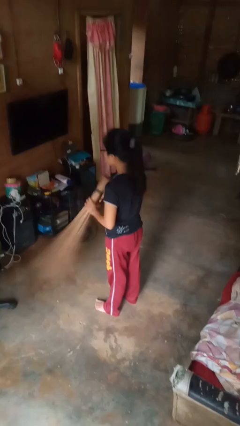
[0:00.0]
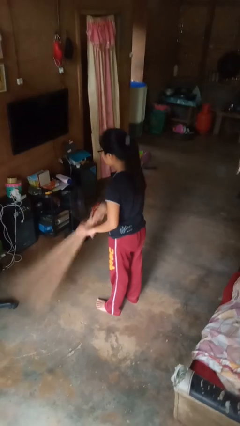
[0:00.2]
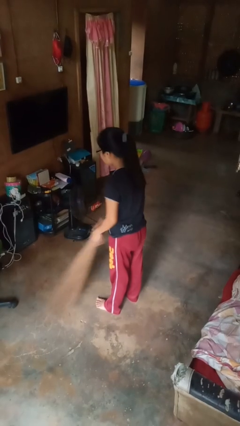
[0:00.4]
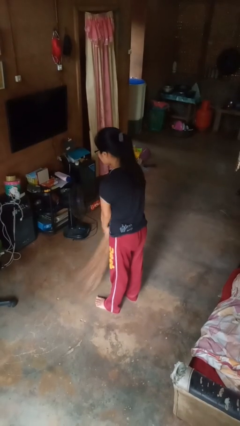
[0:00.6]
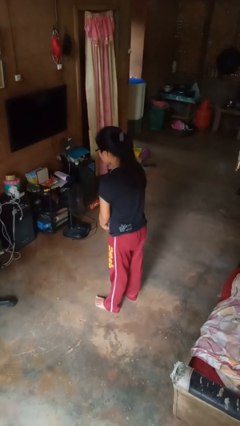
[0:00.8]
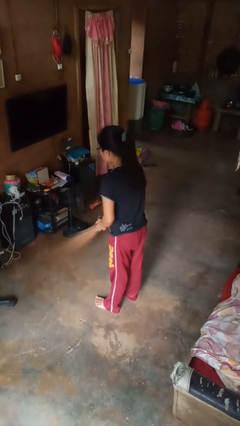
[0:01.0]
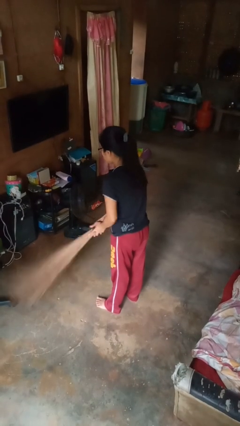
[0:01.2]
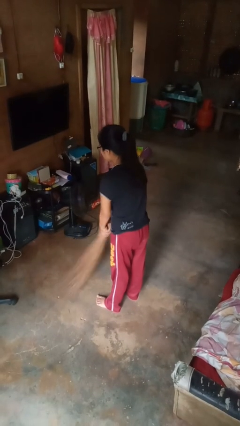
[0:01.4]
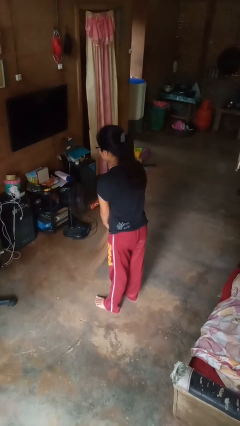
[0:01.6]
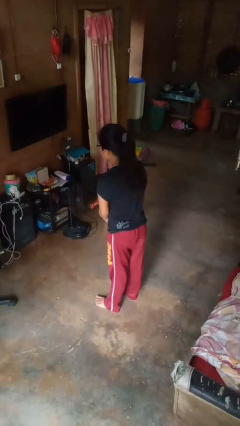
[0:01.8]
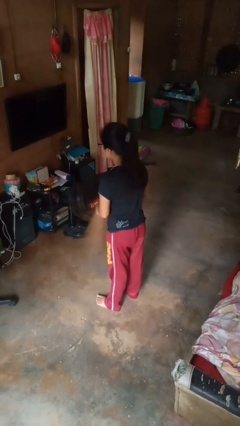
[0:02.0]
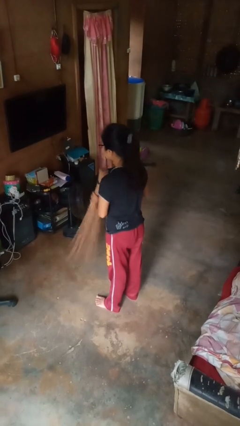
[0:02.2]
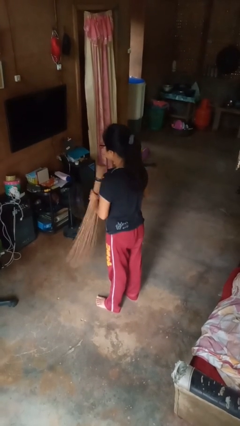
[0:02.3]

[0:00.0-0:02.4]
person sweeps floor

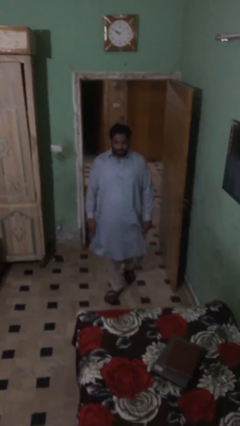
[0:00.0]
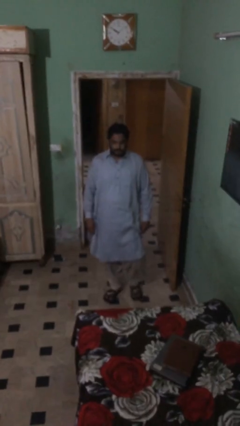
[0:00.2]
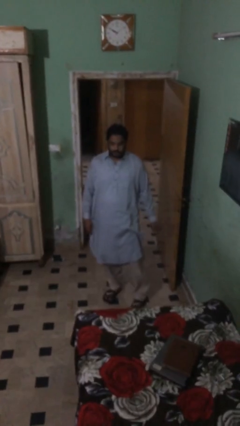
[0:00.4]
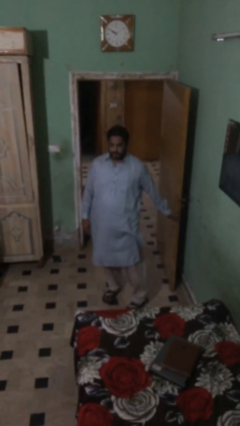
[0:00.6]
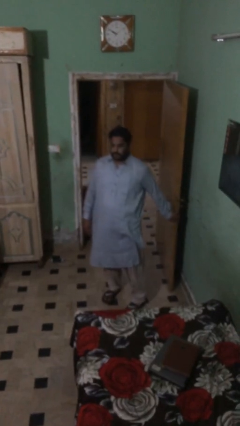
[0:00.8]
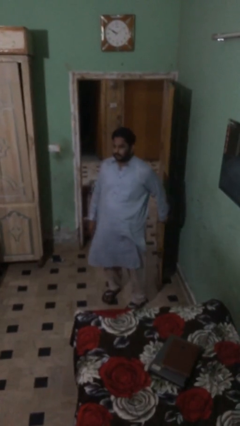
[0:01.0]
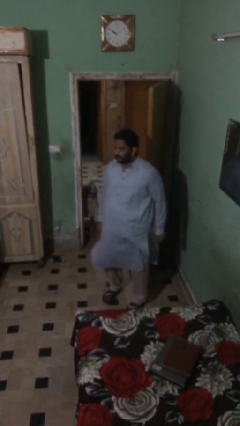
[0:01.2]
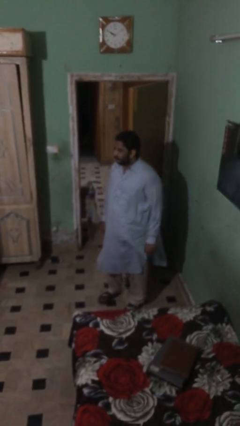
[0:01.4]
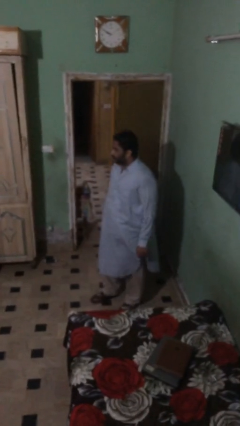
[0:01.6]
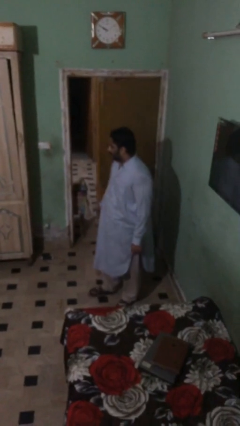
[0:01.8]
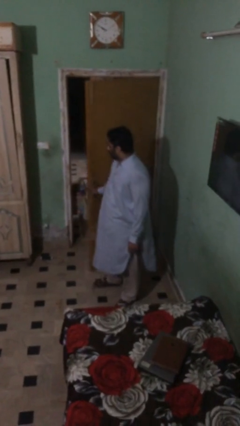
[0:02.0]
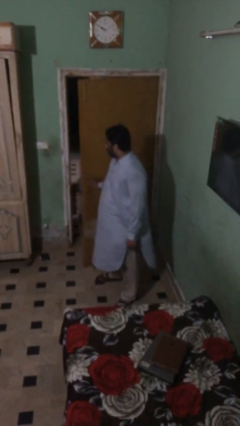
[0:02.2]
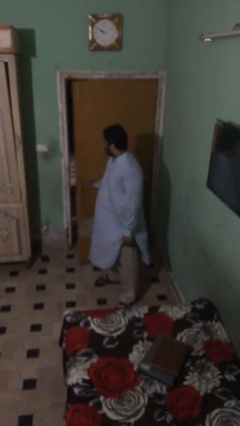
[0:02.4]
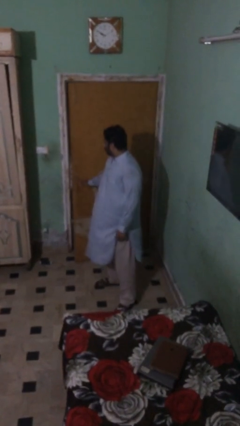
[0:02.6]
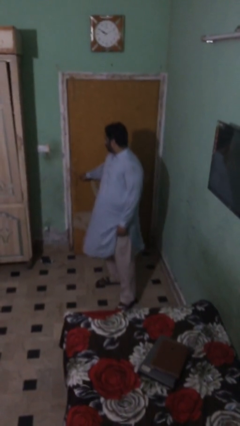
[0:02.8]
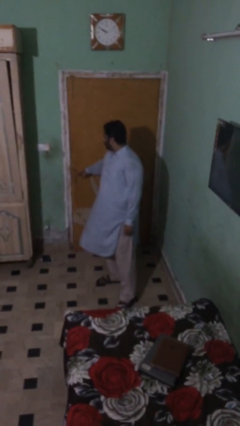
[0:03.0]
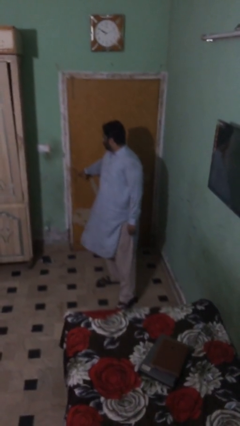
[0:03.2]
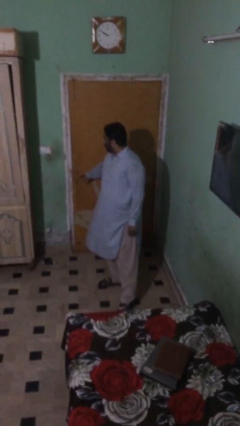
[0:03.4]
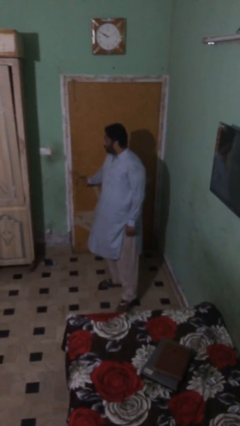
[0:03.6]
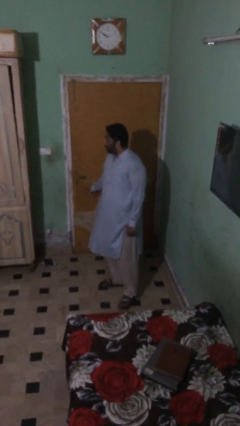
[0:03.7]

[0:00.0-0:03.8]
person closes facility door

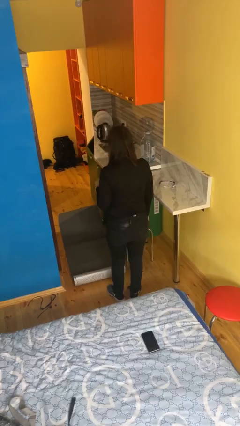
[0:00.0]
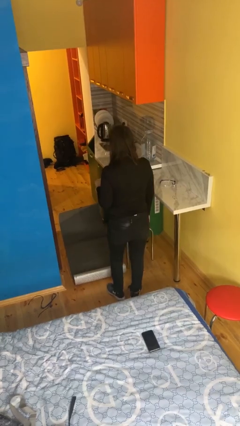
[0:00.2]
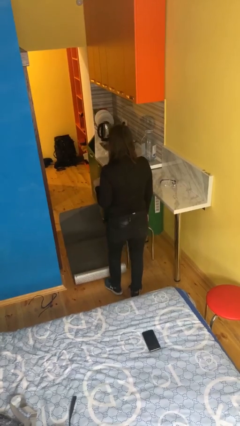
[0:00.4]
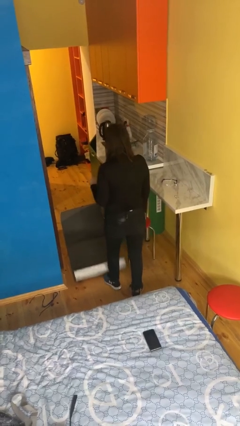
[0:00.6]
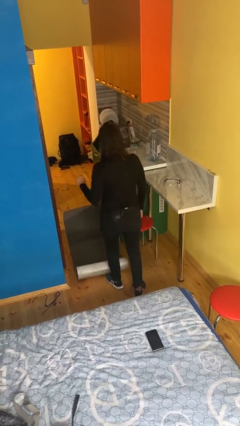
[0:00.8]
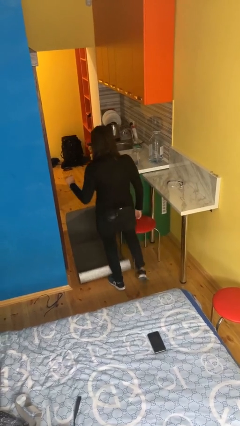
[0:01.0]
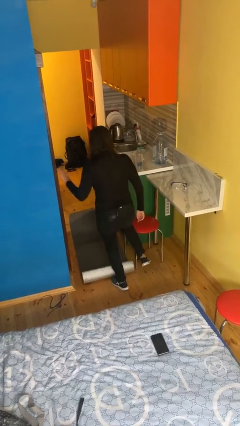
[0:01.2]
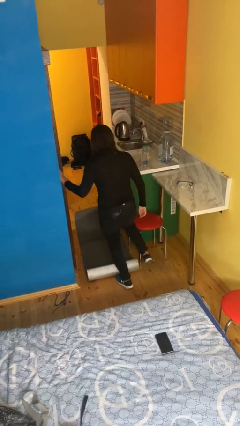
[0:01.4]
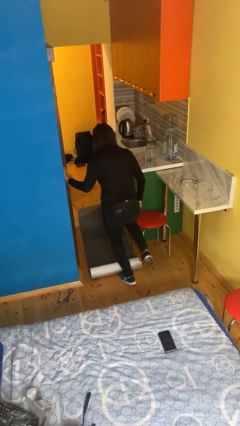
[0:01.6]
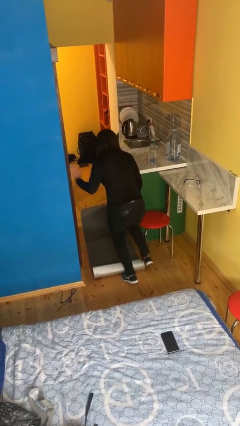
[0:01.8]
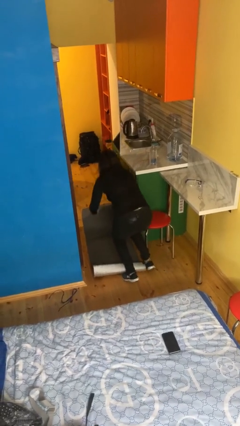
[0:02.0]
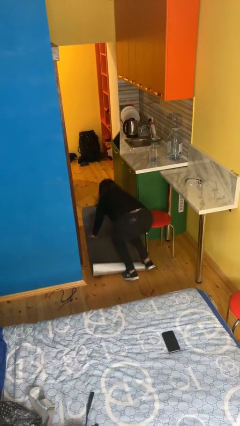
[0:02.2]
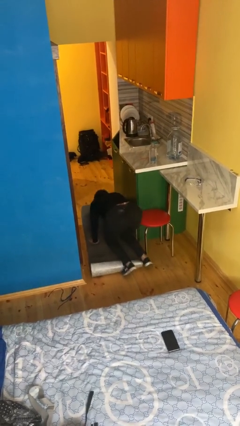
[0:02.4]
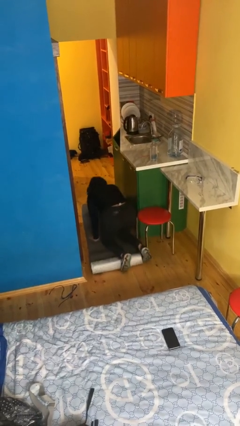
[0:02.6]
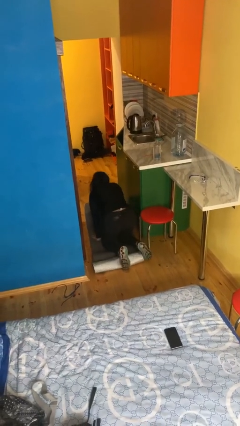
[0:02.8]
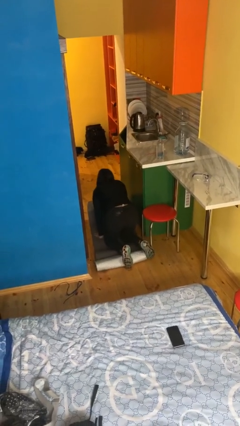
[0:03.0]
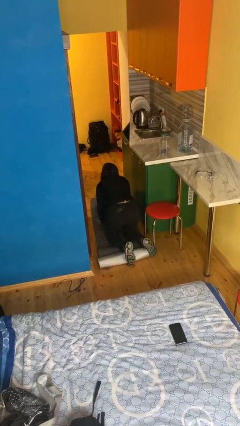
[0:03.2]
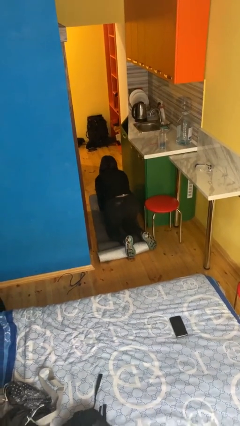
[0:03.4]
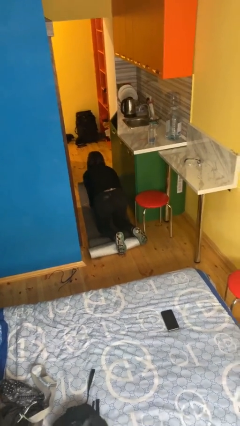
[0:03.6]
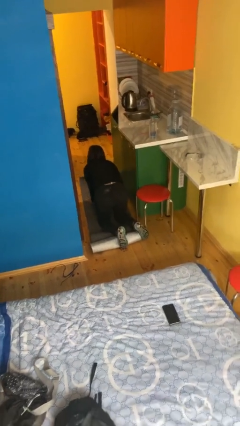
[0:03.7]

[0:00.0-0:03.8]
person trips on object on floor

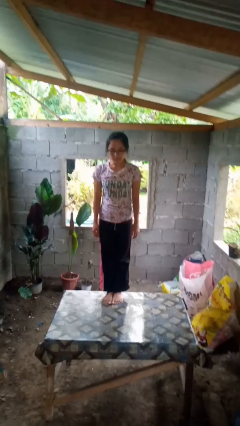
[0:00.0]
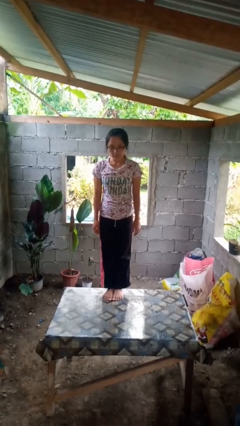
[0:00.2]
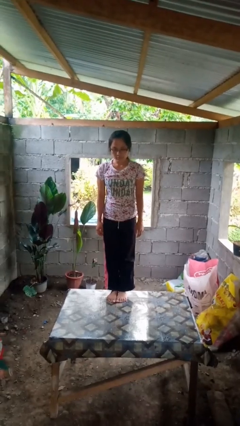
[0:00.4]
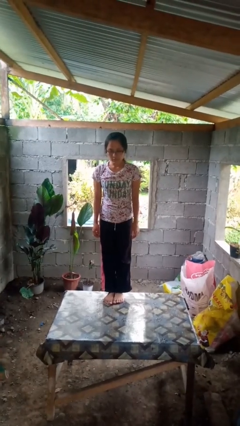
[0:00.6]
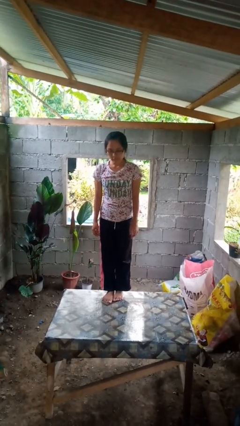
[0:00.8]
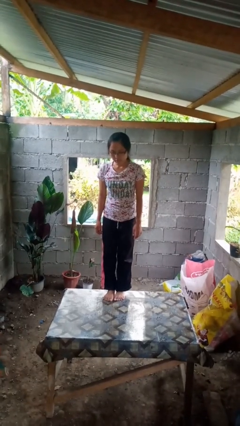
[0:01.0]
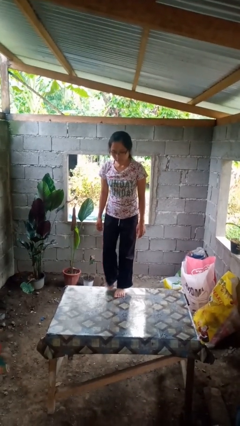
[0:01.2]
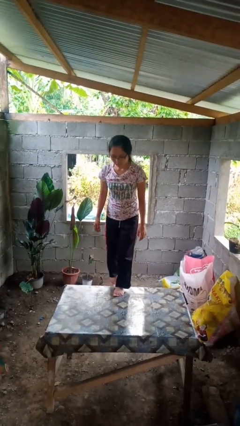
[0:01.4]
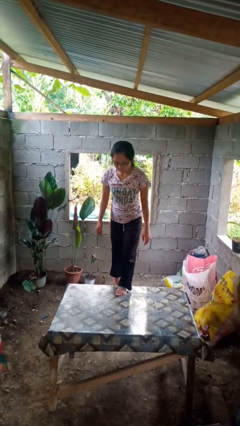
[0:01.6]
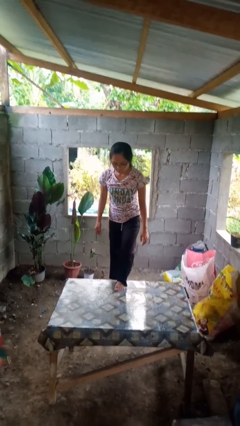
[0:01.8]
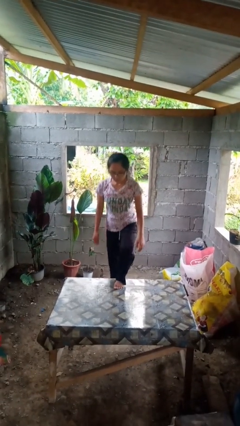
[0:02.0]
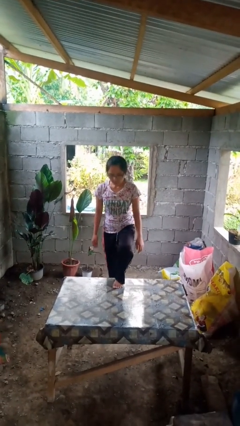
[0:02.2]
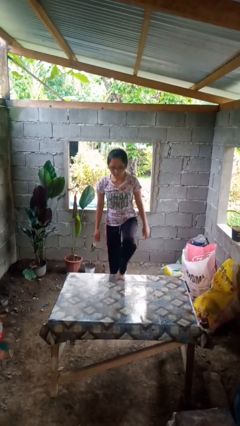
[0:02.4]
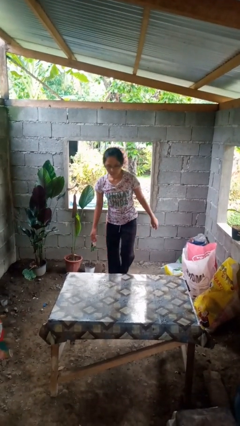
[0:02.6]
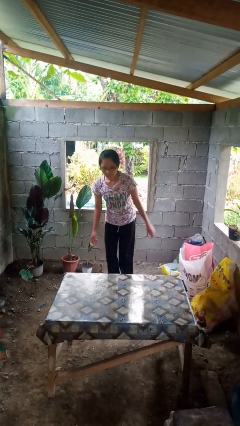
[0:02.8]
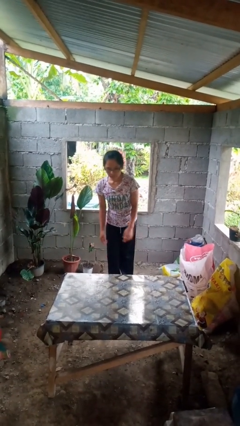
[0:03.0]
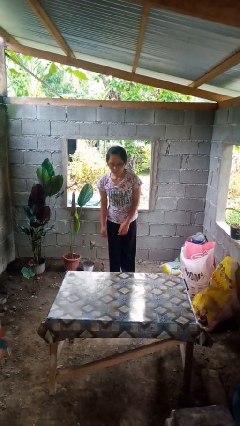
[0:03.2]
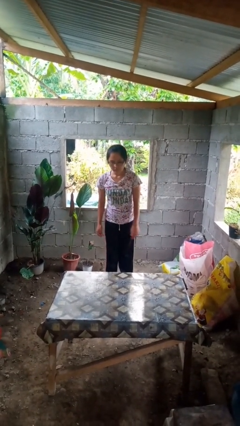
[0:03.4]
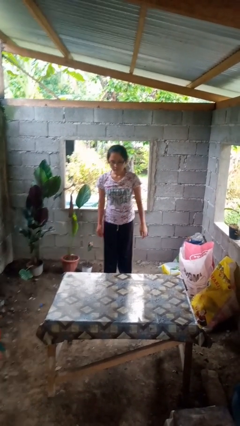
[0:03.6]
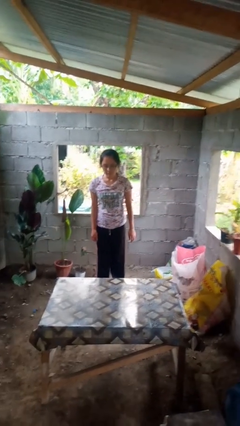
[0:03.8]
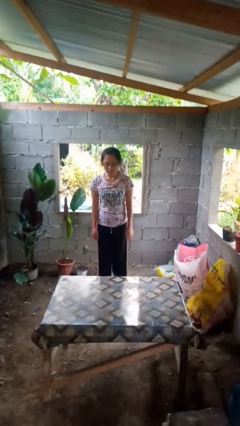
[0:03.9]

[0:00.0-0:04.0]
person climbs off table

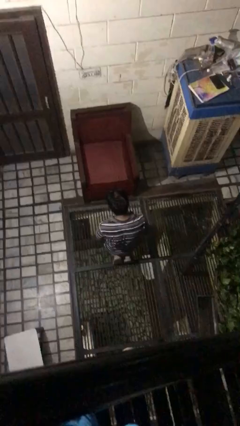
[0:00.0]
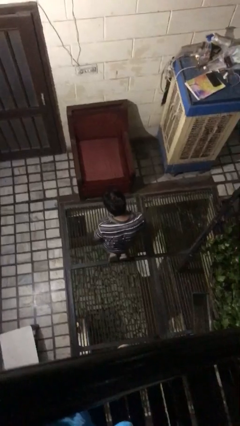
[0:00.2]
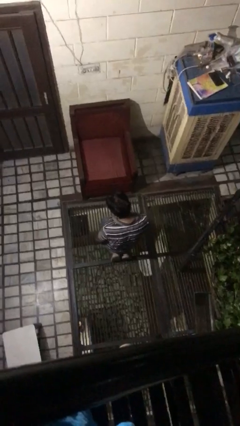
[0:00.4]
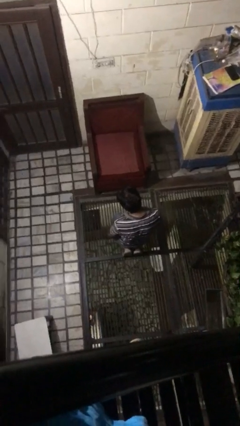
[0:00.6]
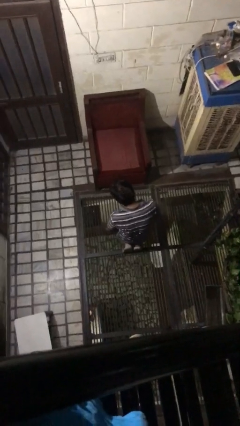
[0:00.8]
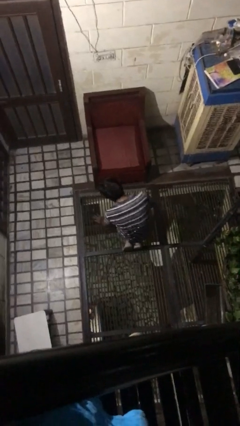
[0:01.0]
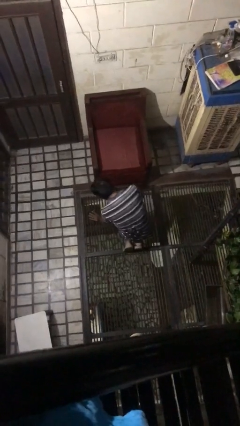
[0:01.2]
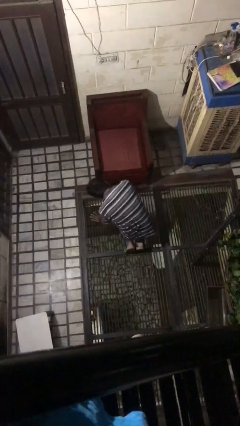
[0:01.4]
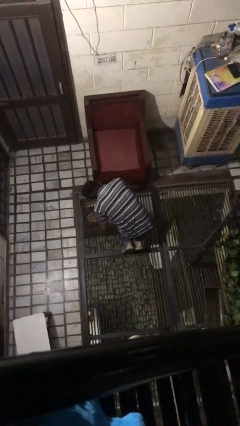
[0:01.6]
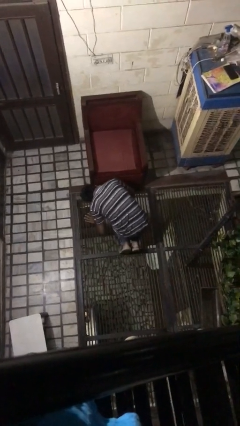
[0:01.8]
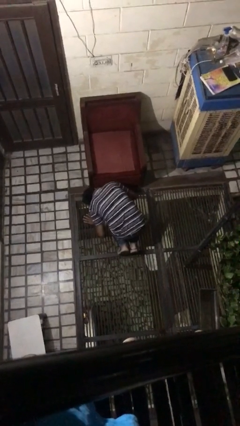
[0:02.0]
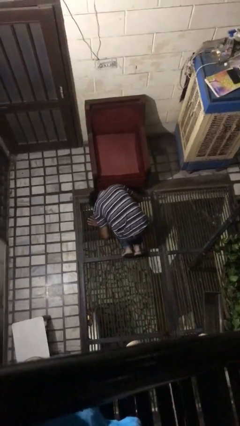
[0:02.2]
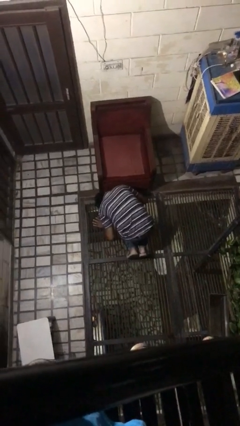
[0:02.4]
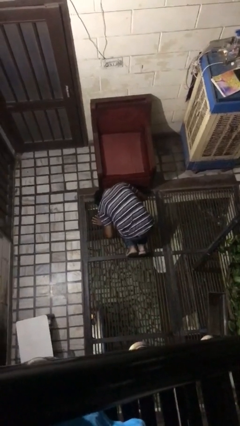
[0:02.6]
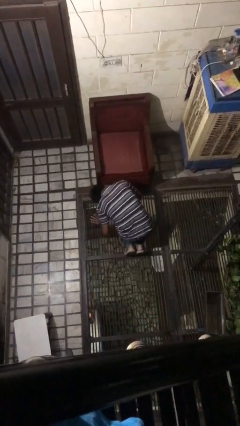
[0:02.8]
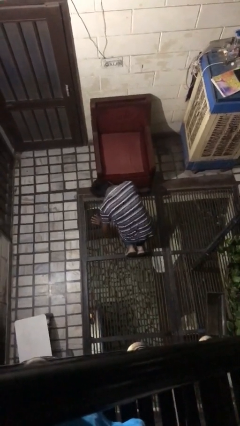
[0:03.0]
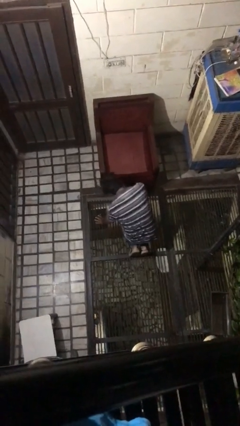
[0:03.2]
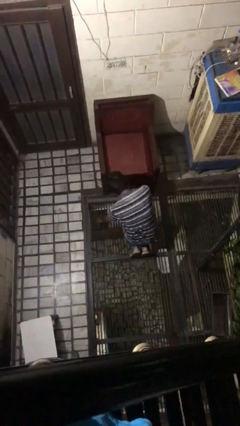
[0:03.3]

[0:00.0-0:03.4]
person searches under couch

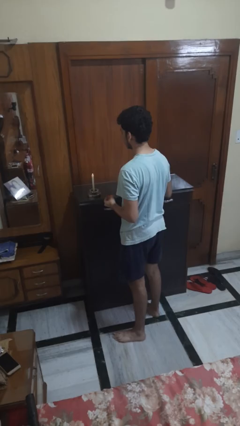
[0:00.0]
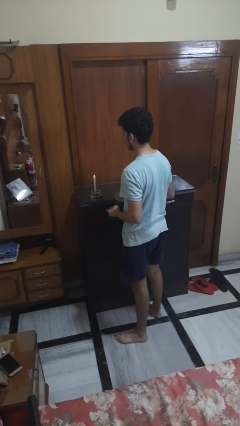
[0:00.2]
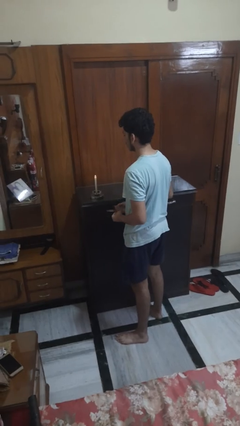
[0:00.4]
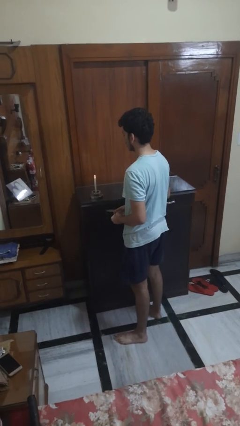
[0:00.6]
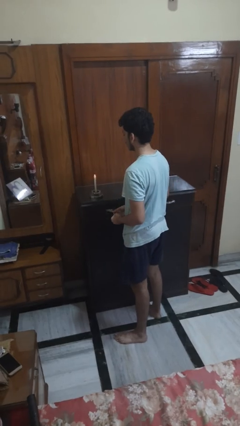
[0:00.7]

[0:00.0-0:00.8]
person extinguishes candle
